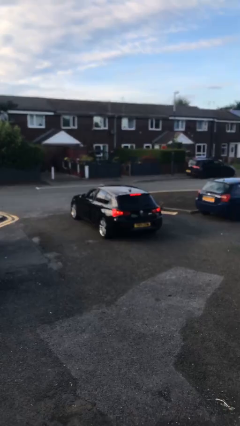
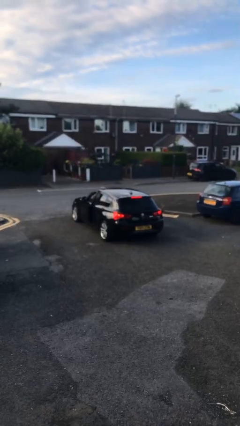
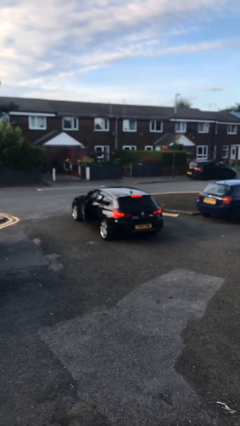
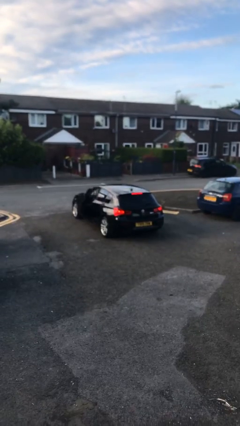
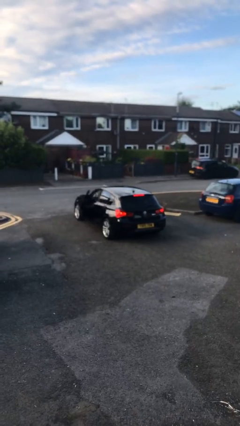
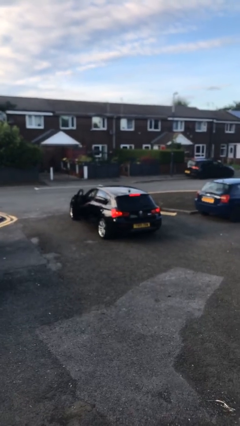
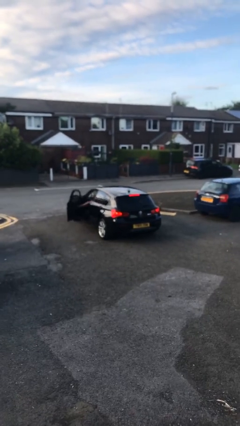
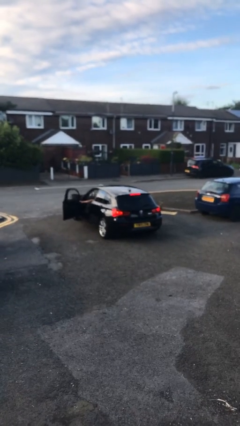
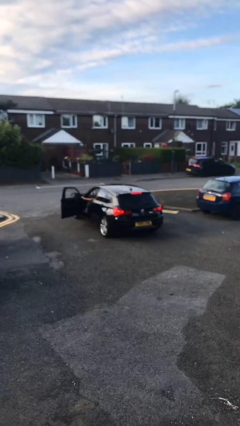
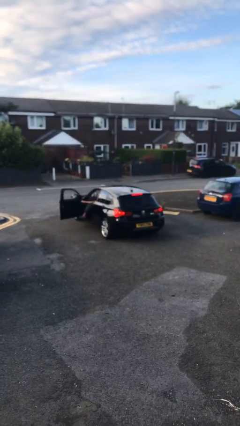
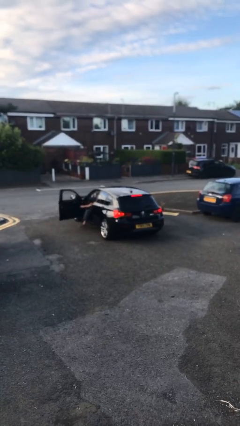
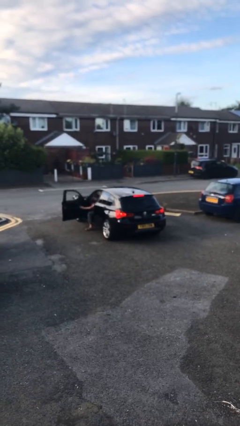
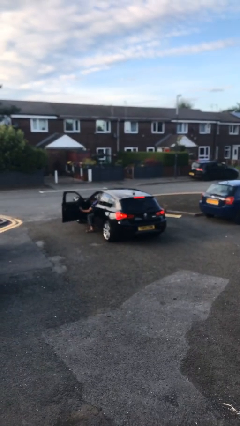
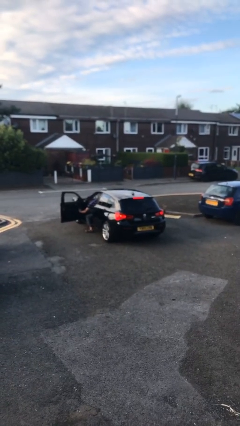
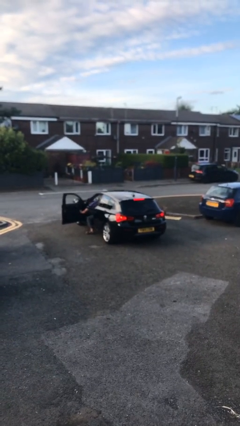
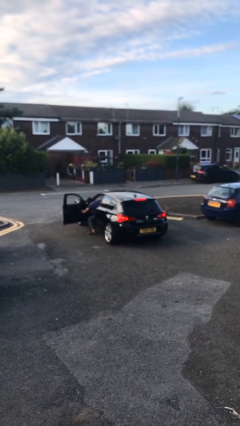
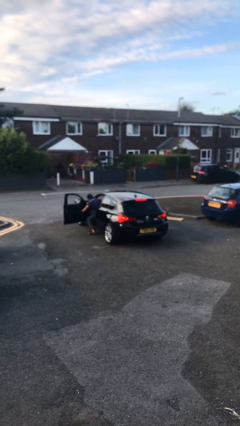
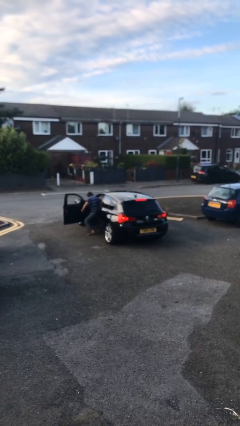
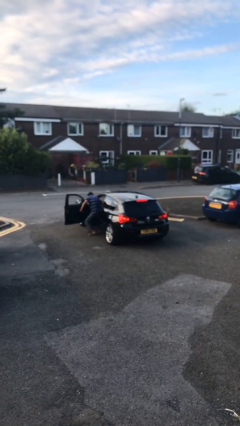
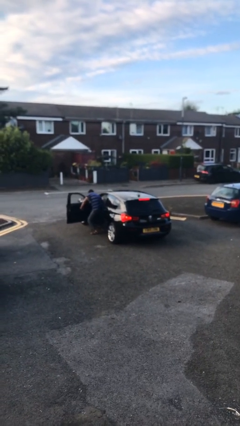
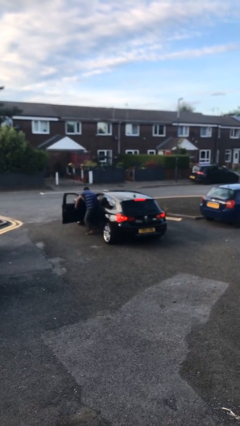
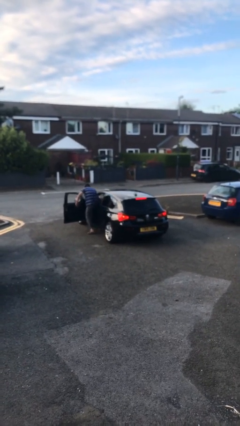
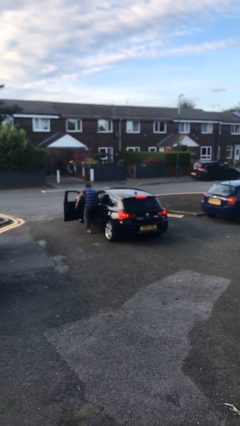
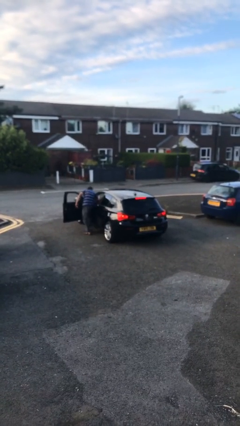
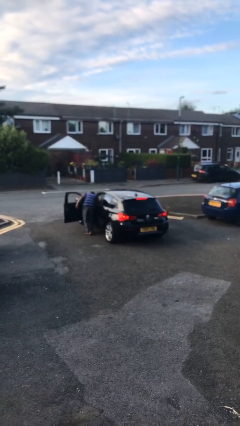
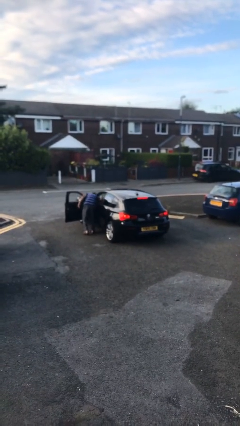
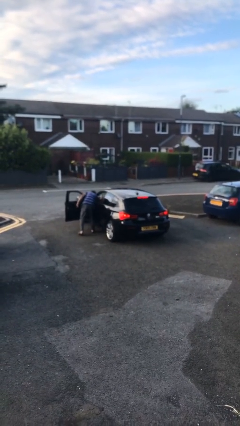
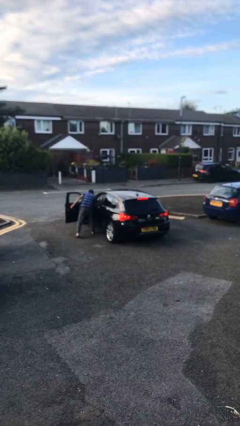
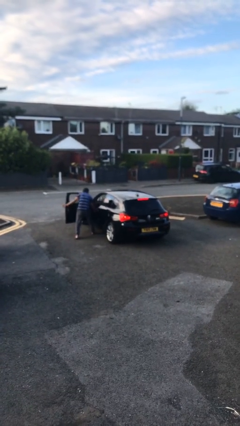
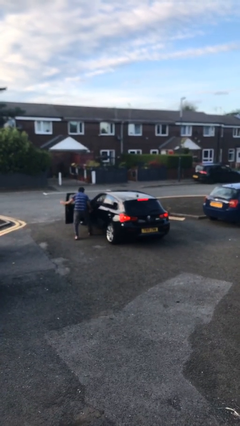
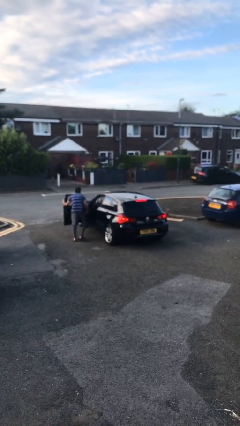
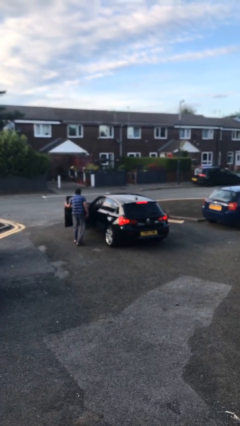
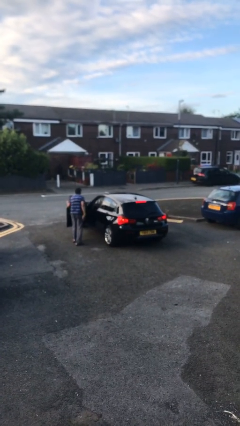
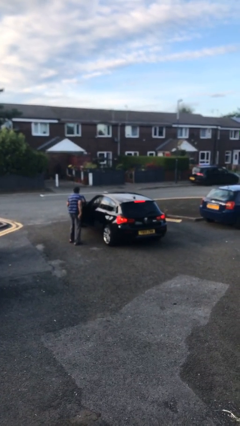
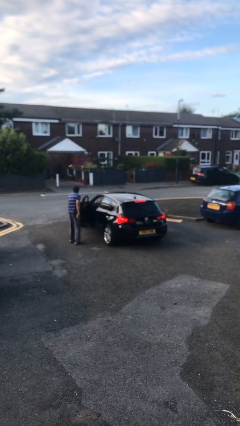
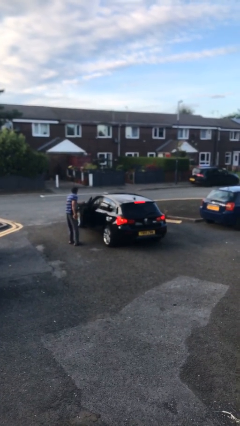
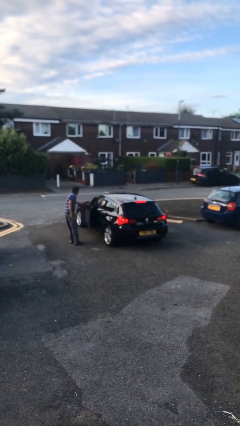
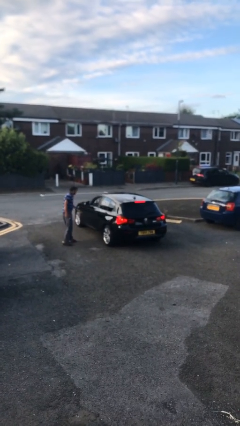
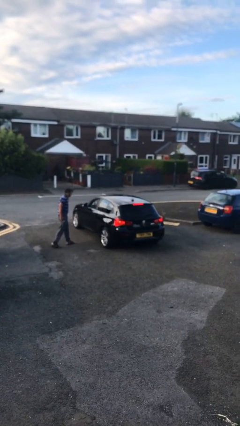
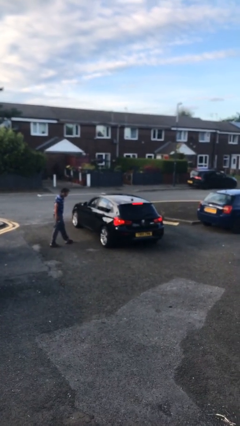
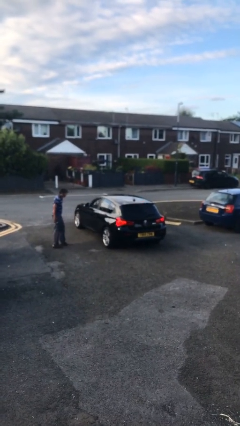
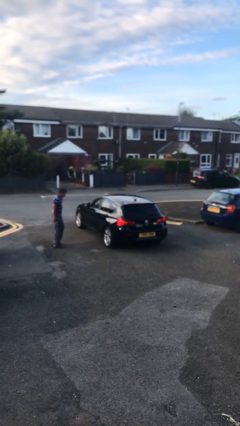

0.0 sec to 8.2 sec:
car drops off person

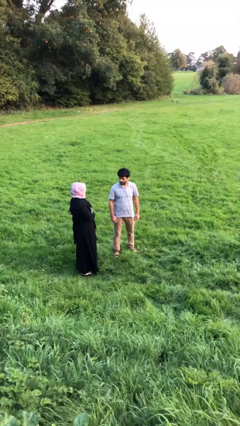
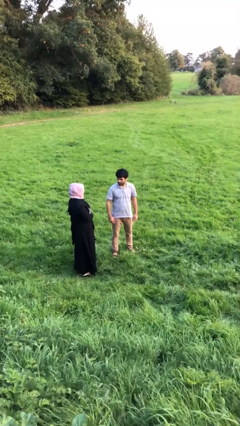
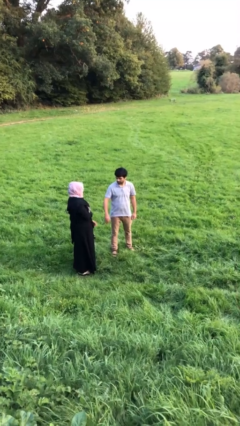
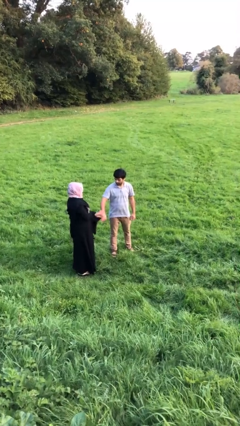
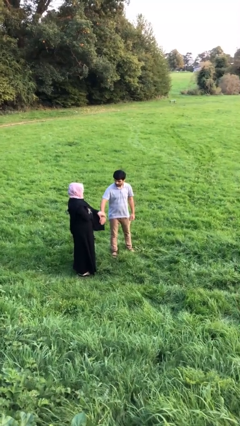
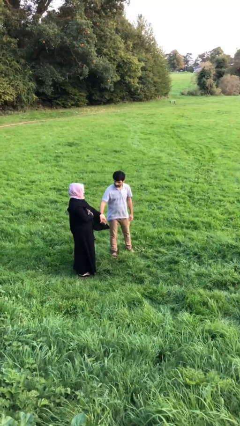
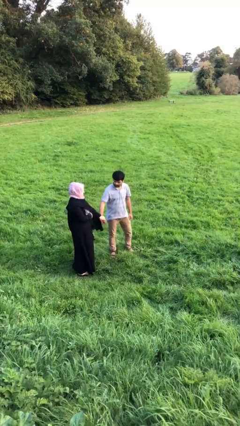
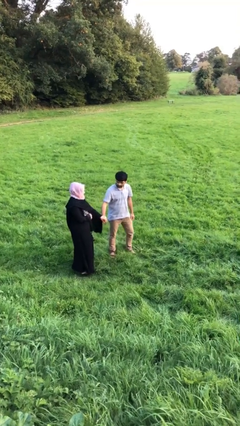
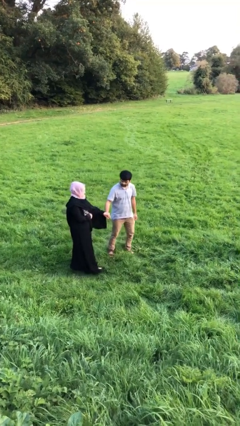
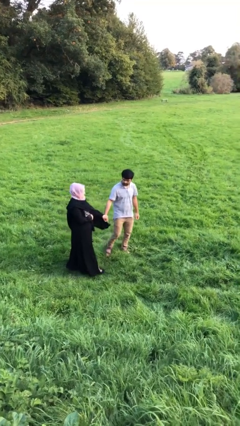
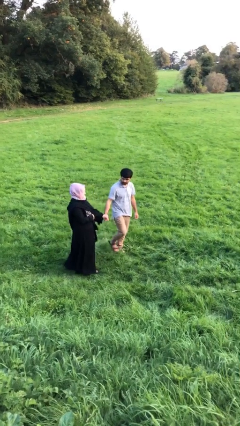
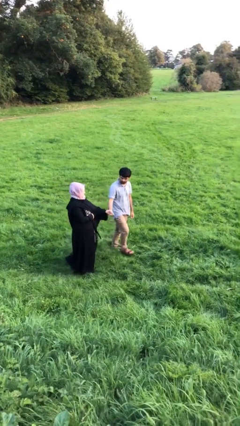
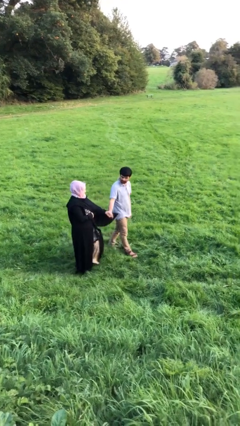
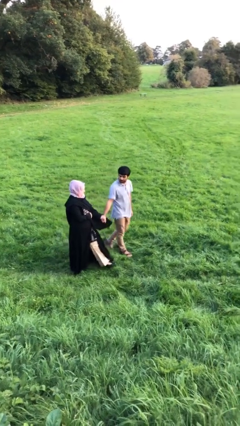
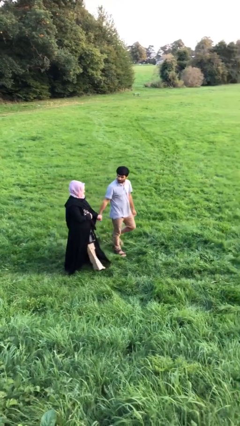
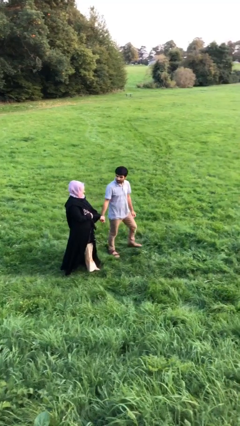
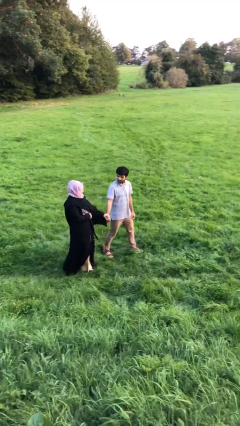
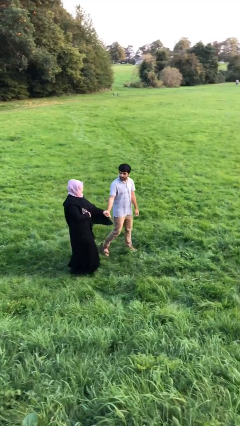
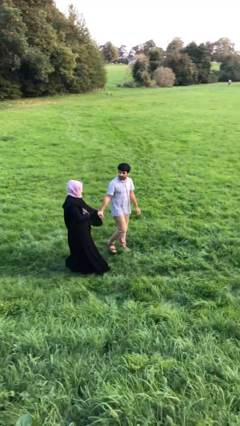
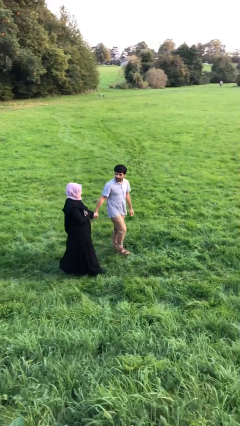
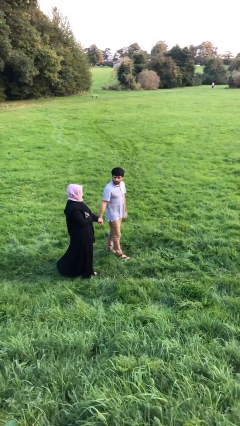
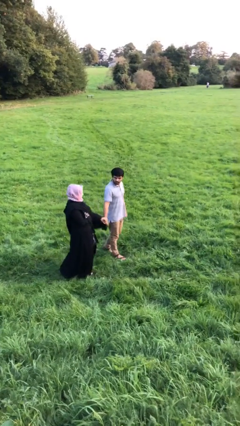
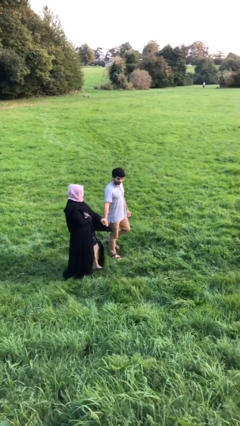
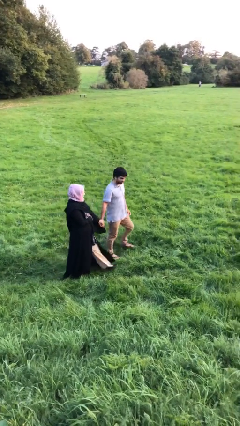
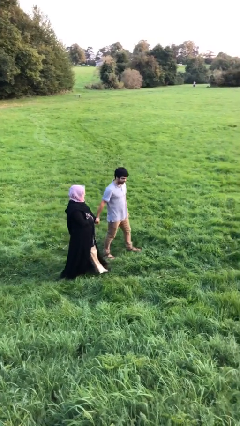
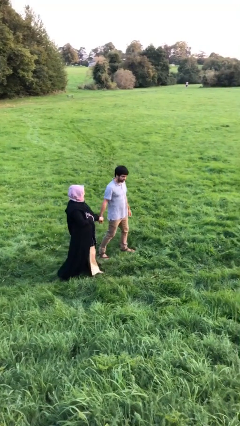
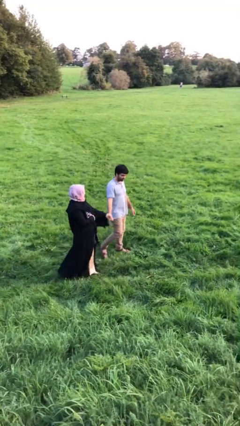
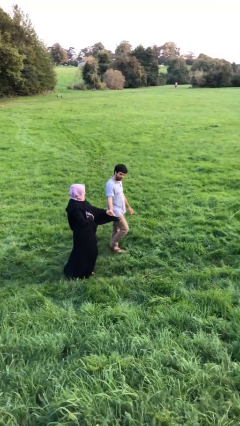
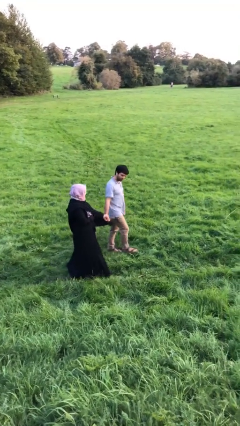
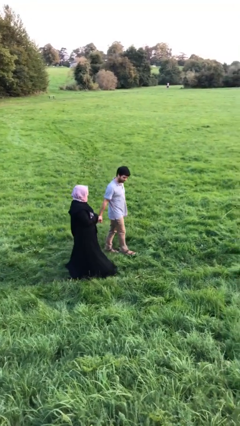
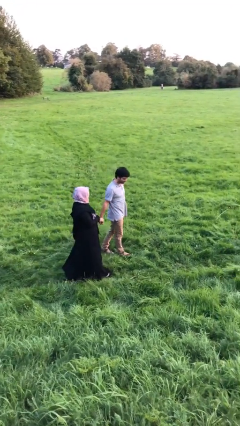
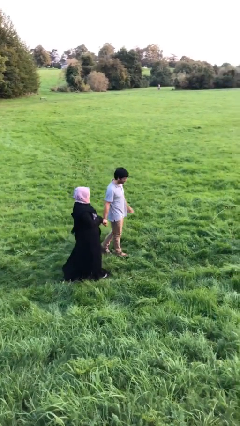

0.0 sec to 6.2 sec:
person holds hand

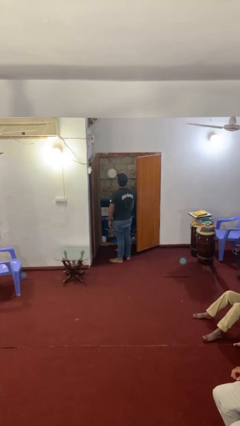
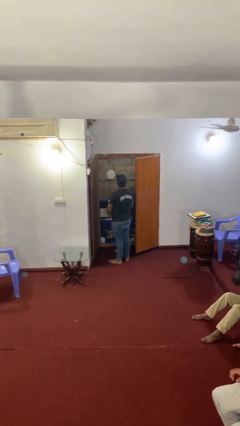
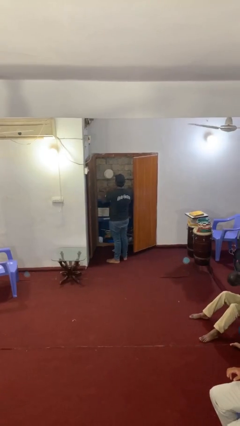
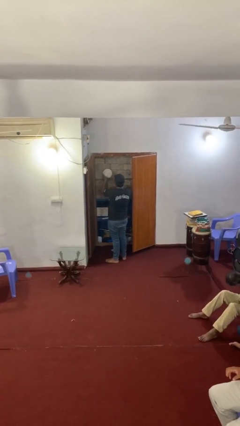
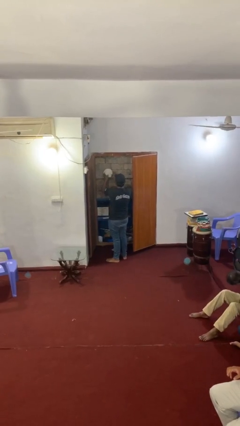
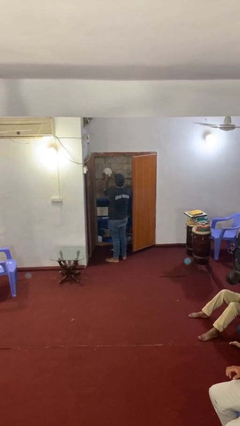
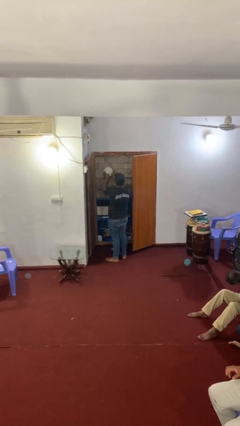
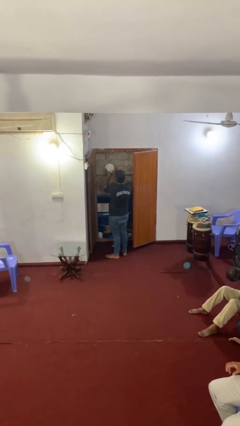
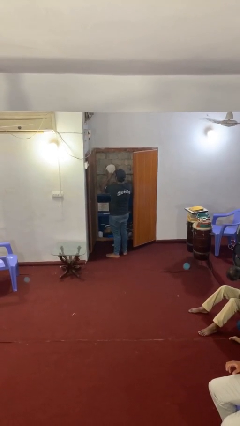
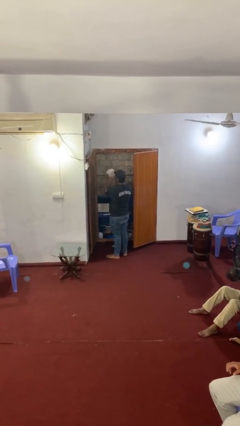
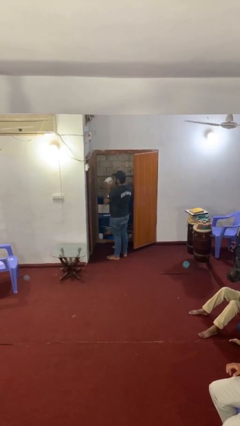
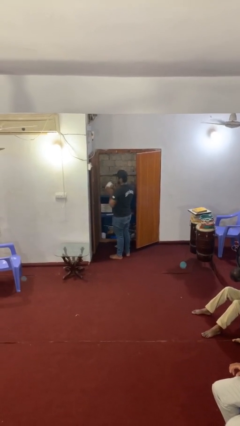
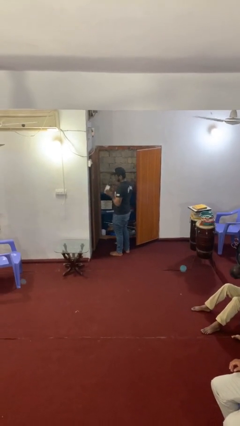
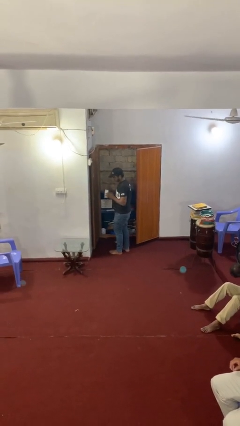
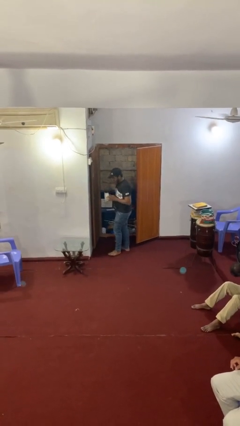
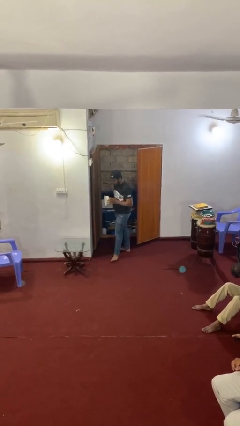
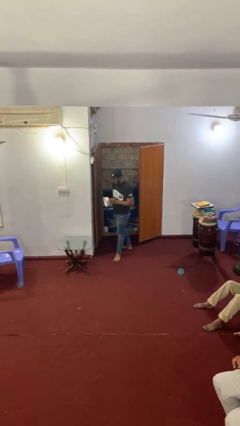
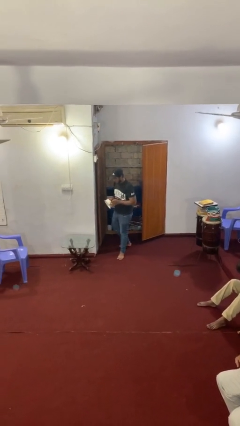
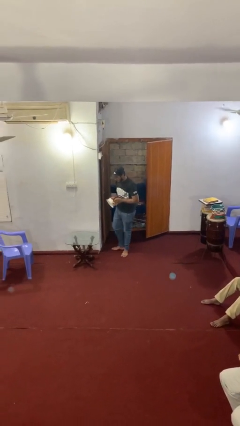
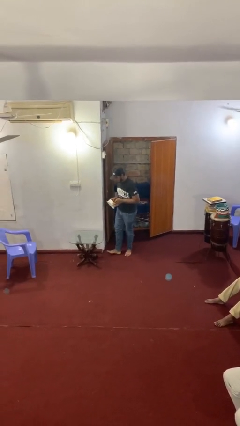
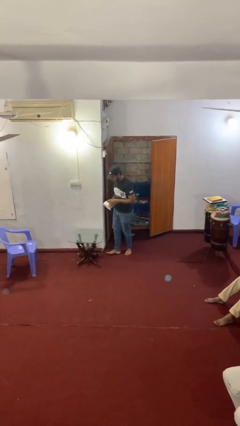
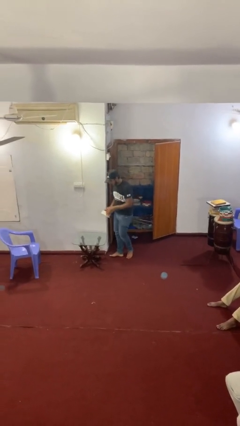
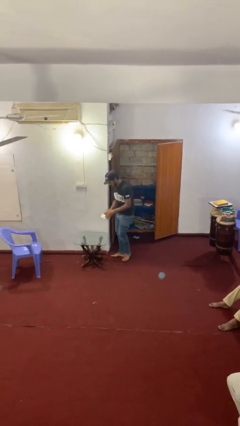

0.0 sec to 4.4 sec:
person picks up object from shelf
